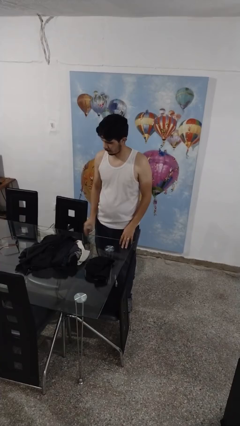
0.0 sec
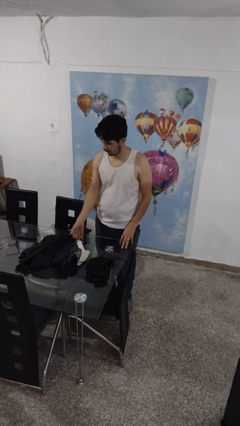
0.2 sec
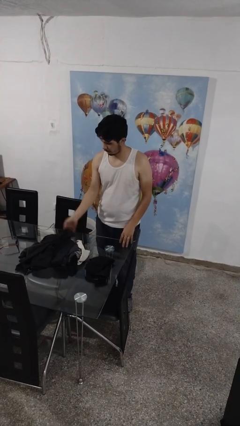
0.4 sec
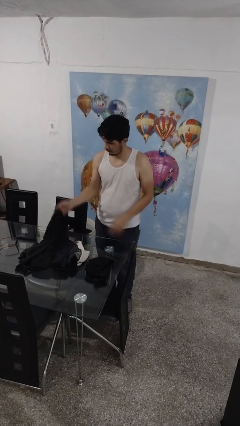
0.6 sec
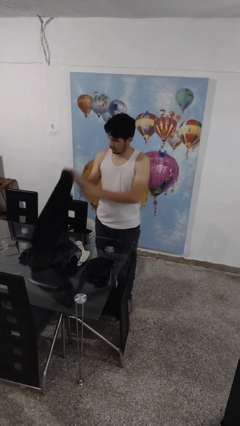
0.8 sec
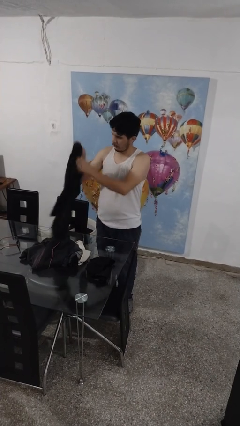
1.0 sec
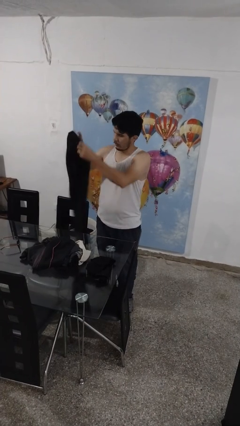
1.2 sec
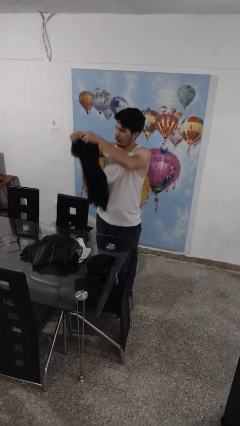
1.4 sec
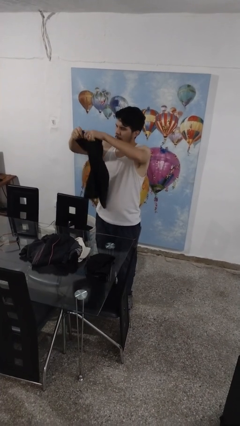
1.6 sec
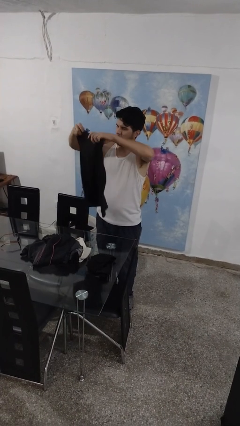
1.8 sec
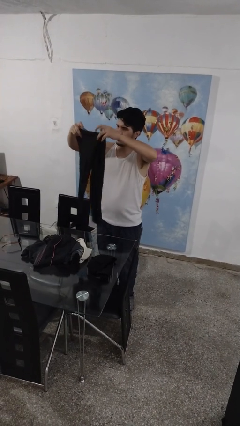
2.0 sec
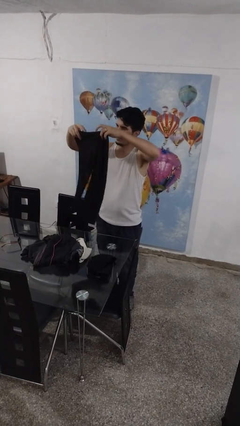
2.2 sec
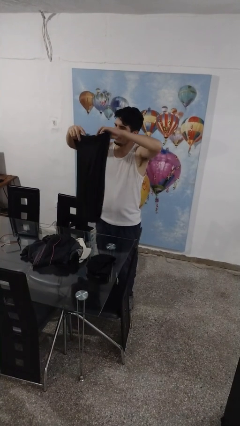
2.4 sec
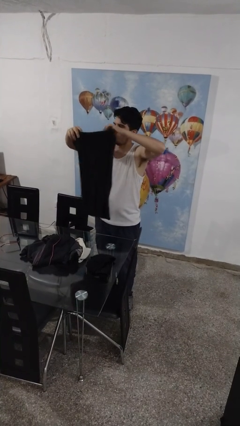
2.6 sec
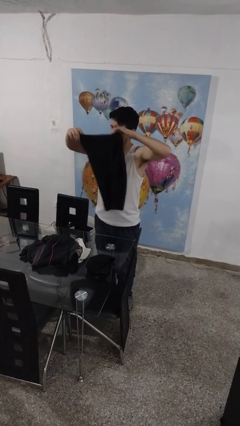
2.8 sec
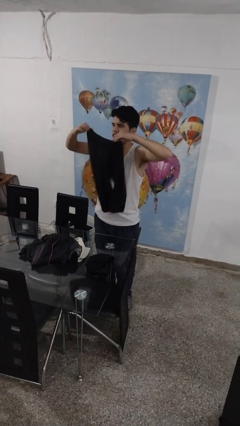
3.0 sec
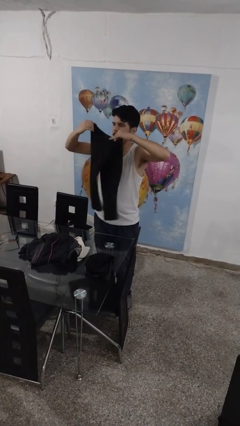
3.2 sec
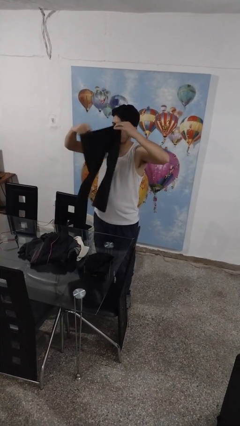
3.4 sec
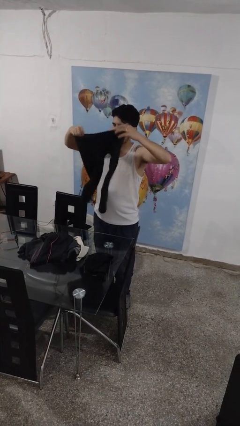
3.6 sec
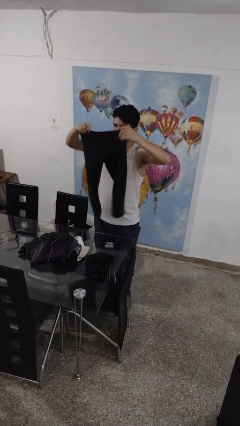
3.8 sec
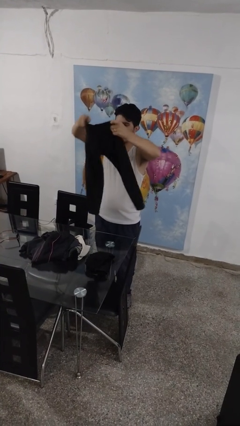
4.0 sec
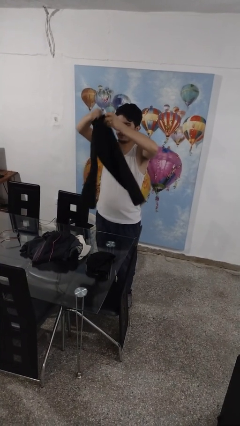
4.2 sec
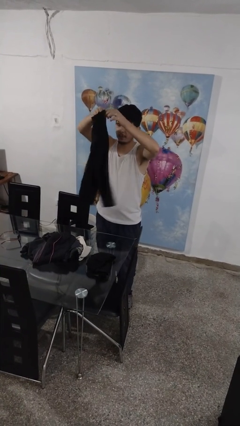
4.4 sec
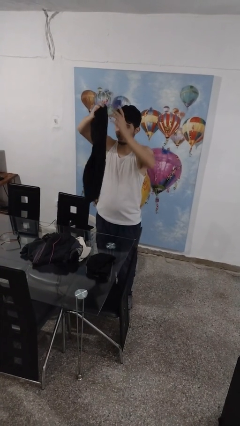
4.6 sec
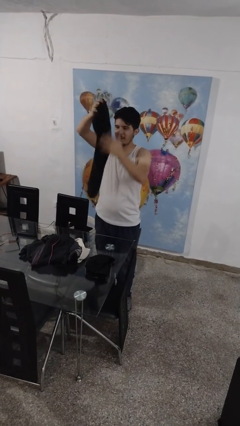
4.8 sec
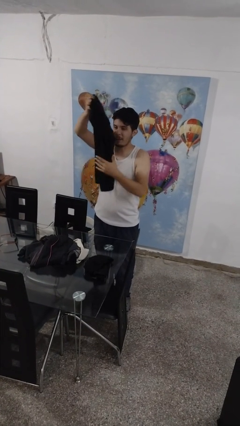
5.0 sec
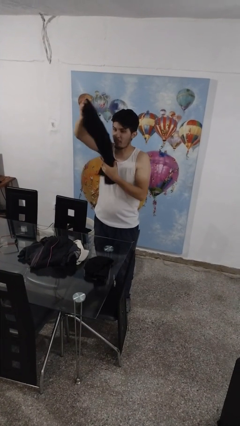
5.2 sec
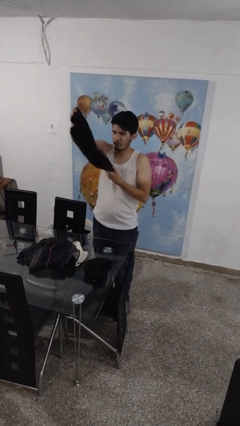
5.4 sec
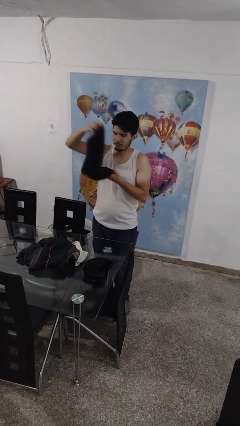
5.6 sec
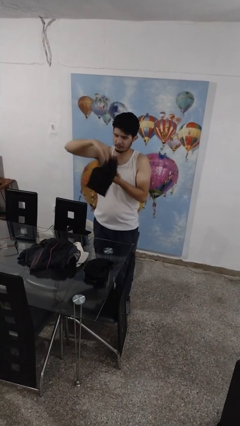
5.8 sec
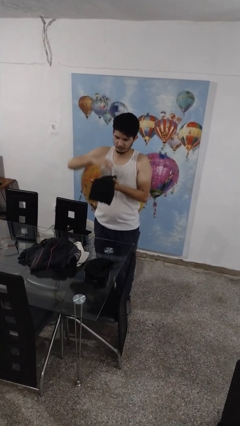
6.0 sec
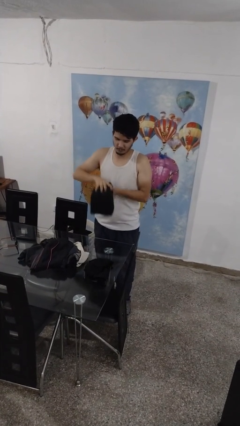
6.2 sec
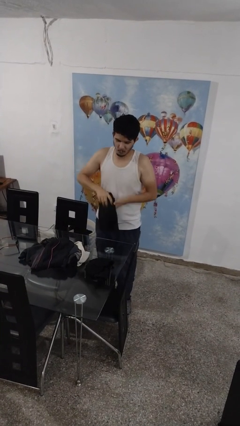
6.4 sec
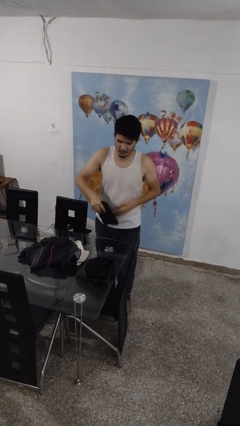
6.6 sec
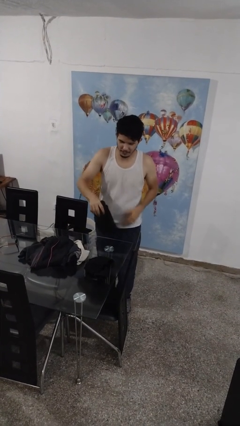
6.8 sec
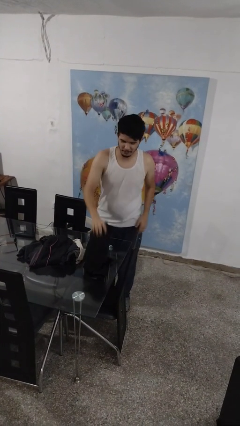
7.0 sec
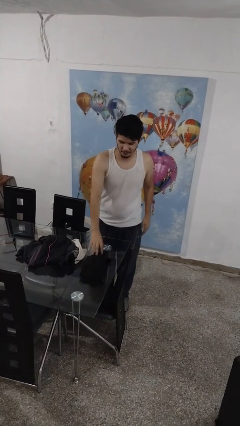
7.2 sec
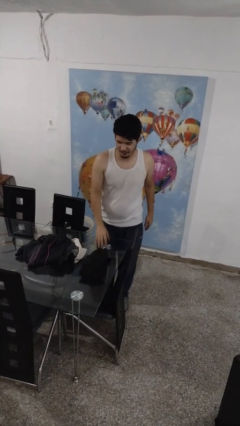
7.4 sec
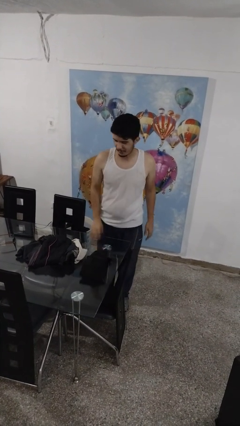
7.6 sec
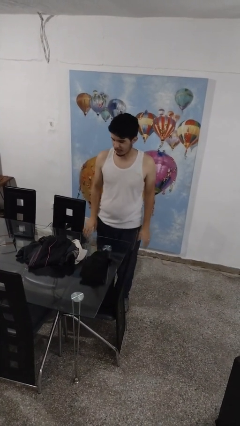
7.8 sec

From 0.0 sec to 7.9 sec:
person folds pants

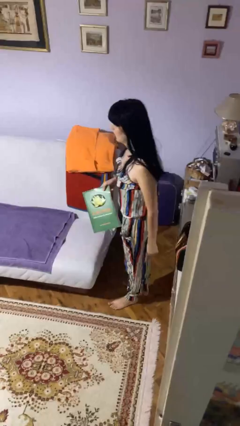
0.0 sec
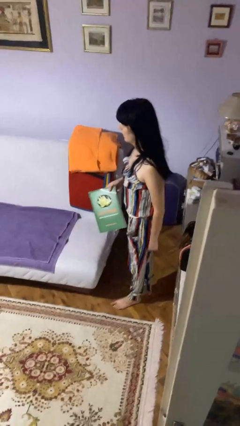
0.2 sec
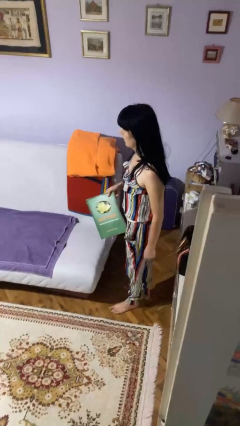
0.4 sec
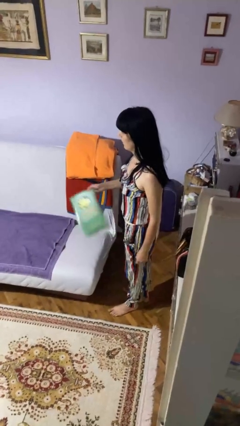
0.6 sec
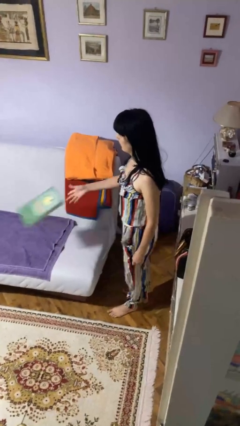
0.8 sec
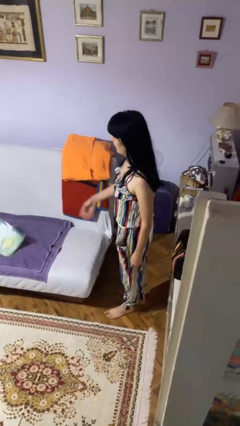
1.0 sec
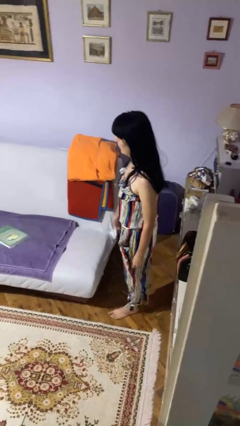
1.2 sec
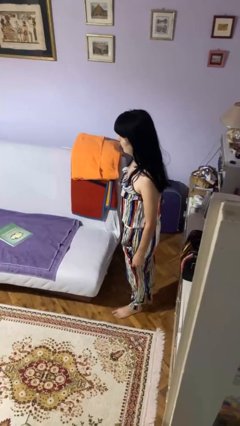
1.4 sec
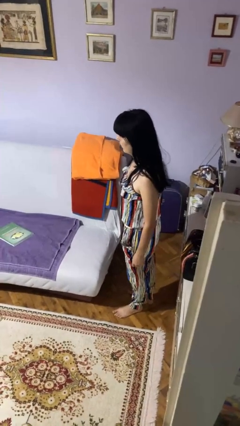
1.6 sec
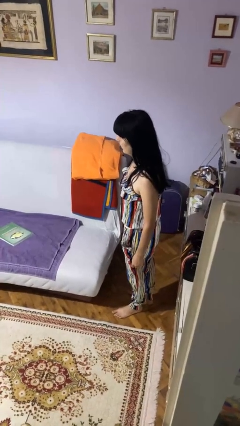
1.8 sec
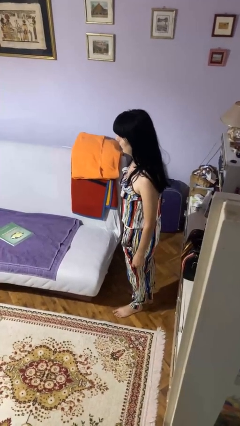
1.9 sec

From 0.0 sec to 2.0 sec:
person throws object on bed

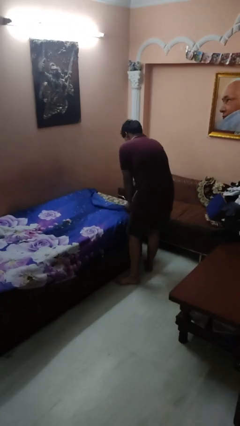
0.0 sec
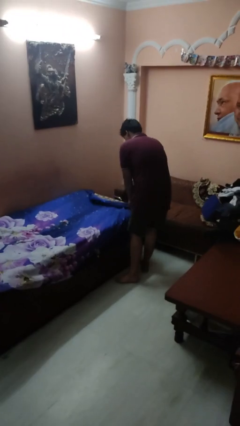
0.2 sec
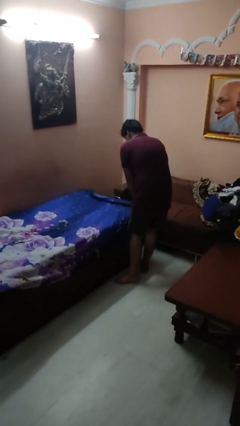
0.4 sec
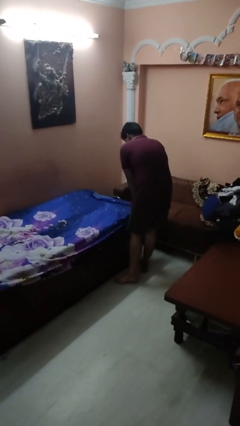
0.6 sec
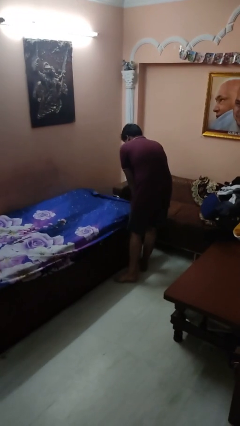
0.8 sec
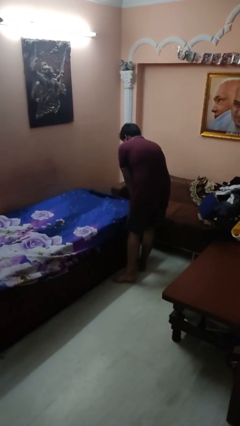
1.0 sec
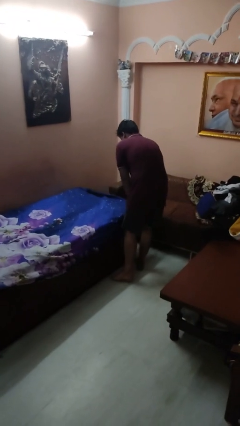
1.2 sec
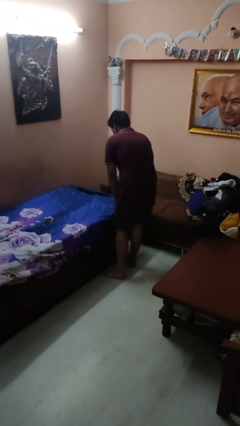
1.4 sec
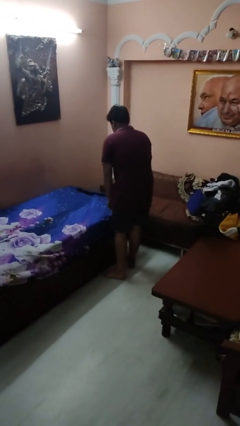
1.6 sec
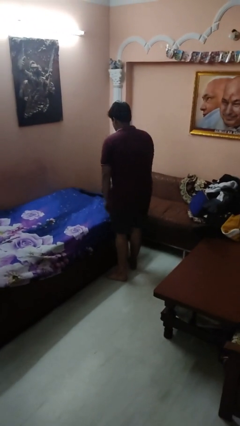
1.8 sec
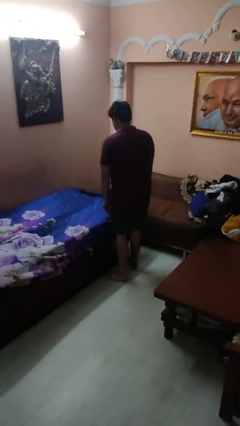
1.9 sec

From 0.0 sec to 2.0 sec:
person makes bed

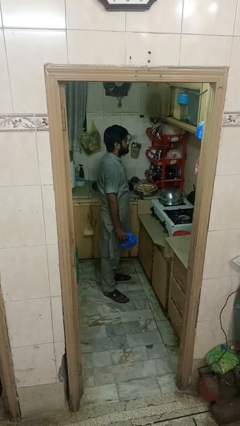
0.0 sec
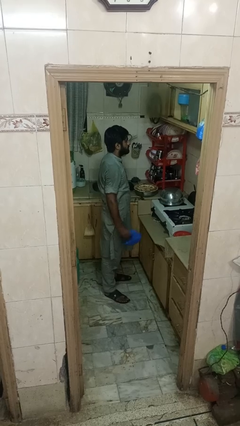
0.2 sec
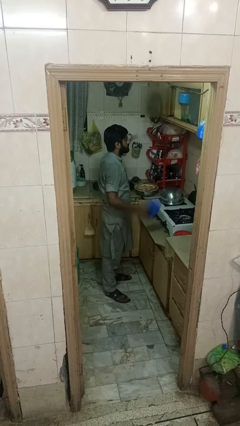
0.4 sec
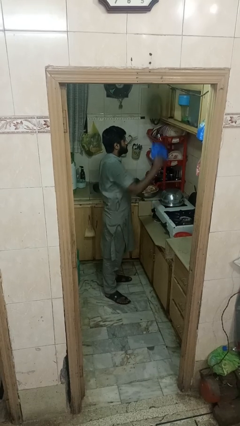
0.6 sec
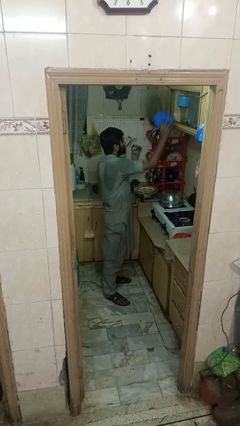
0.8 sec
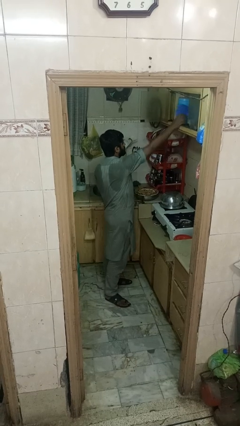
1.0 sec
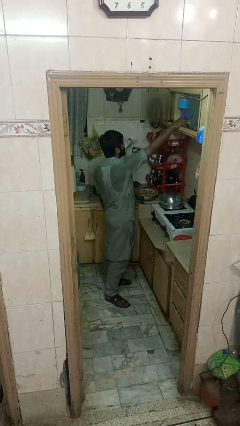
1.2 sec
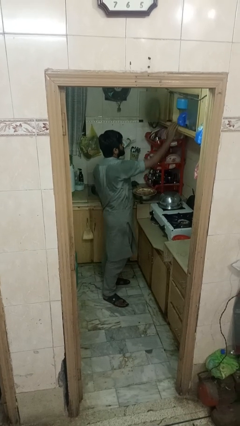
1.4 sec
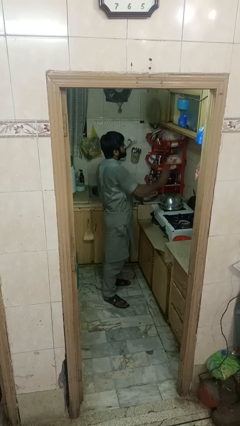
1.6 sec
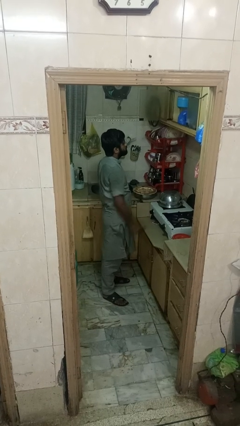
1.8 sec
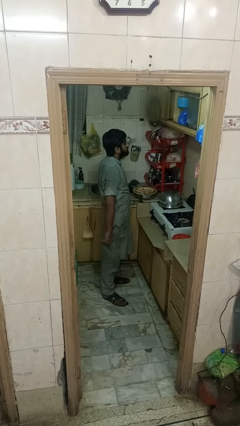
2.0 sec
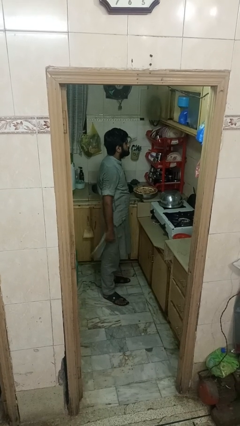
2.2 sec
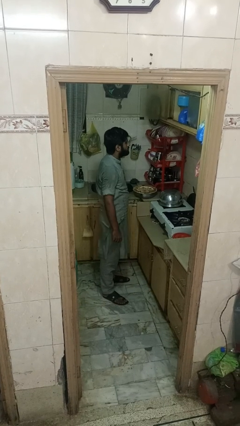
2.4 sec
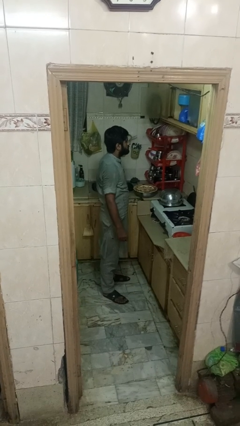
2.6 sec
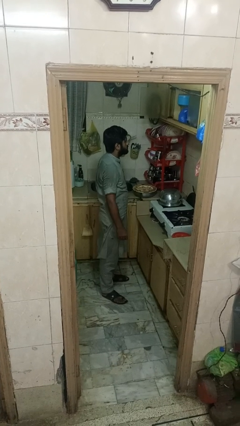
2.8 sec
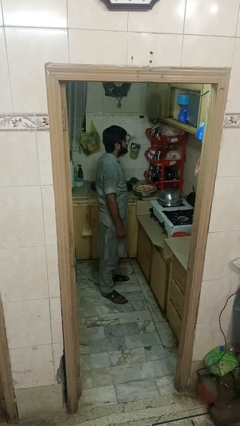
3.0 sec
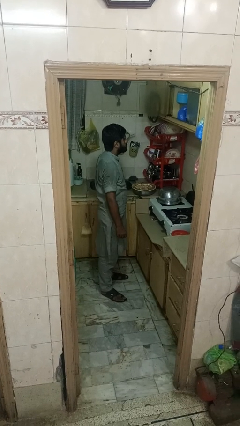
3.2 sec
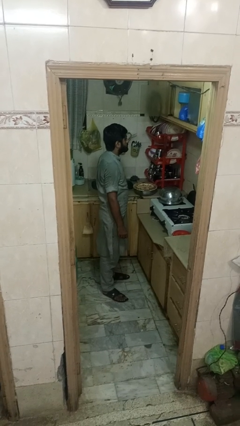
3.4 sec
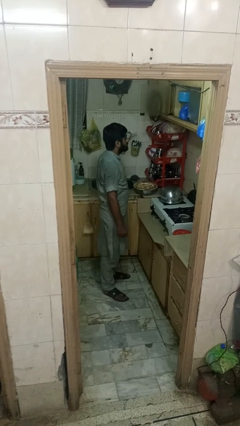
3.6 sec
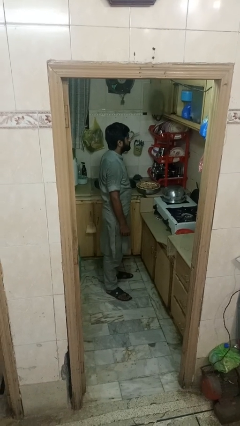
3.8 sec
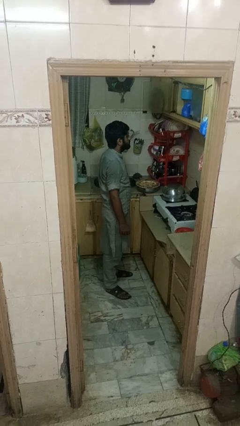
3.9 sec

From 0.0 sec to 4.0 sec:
person loads groceries into cabinet

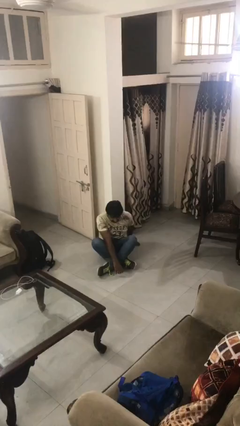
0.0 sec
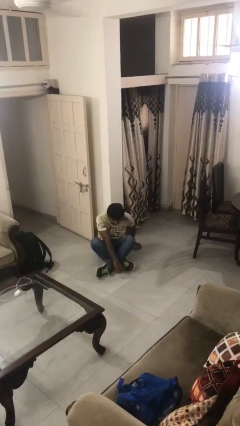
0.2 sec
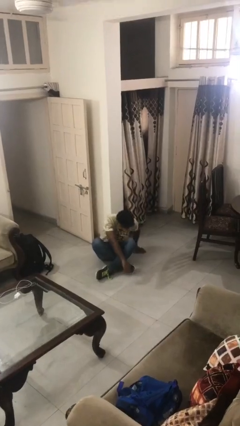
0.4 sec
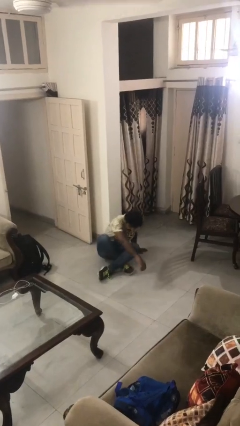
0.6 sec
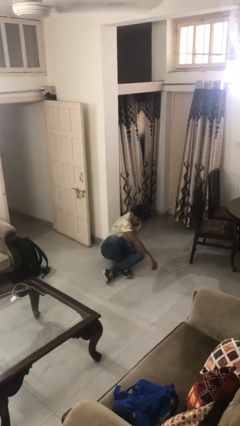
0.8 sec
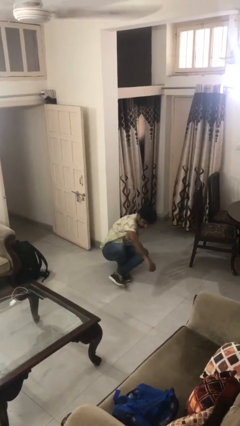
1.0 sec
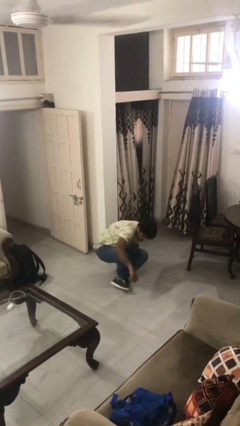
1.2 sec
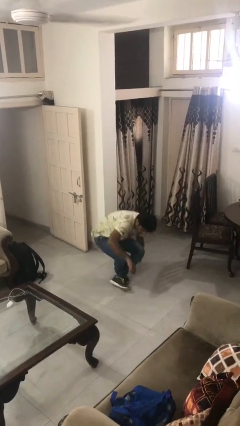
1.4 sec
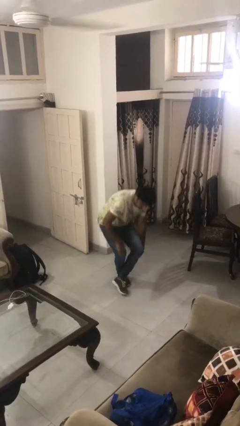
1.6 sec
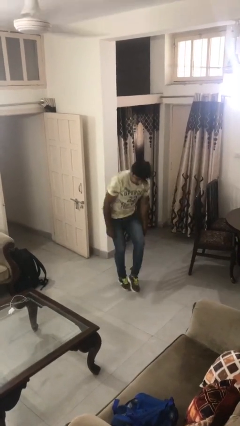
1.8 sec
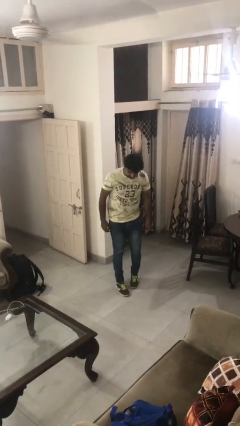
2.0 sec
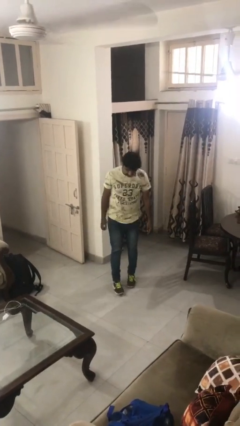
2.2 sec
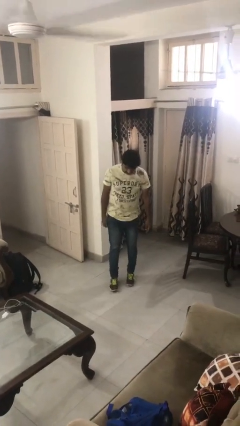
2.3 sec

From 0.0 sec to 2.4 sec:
person stands up from floor
